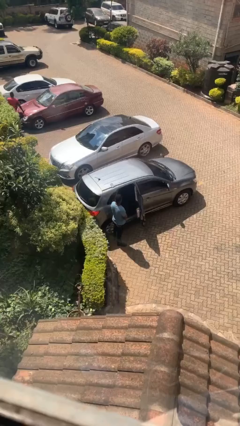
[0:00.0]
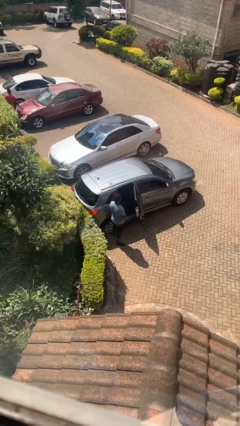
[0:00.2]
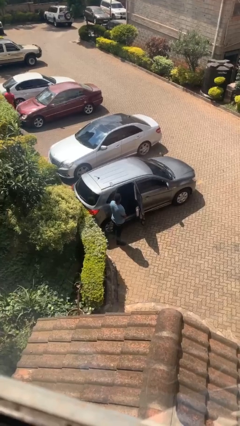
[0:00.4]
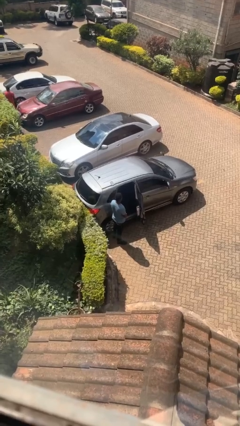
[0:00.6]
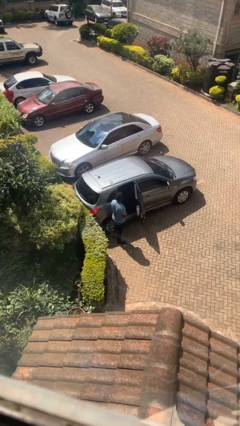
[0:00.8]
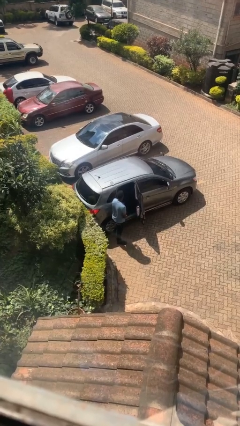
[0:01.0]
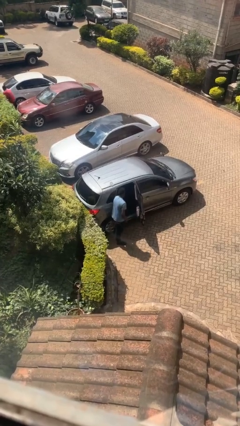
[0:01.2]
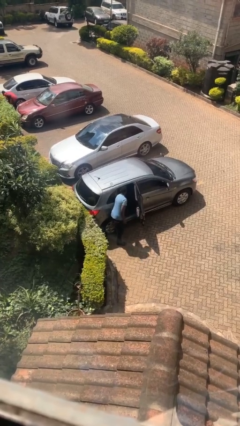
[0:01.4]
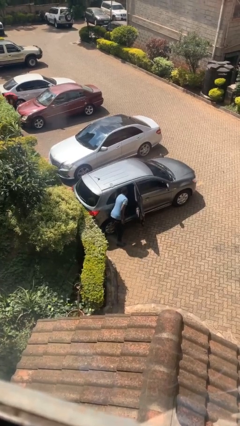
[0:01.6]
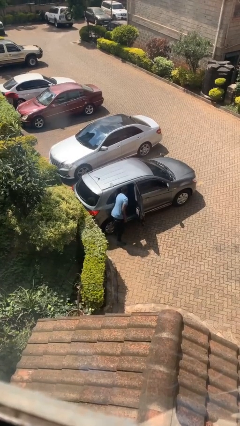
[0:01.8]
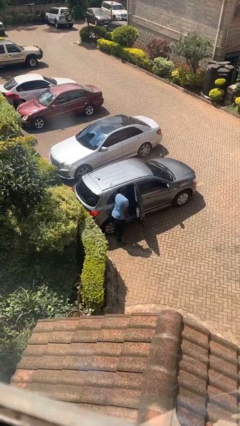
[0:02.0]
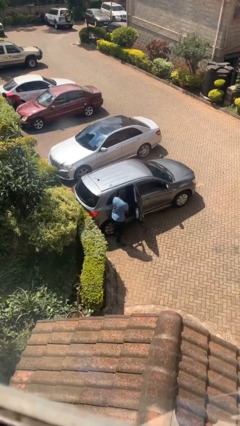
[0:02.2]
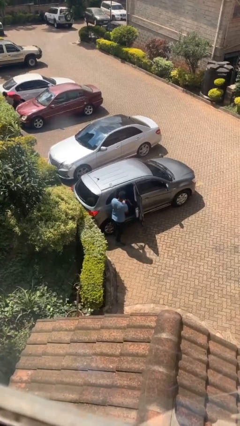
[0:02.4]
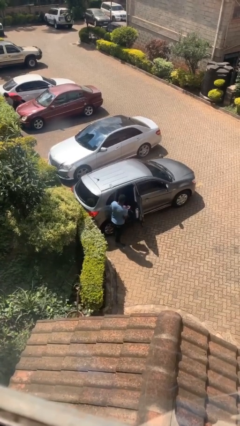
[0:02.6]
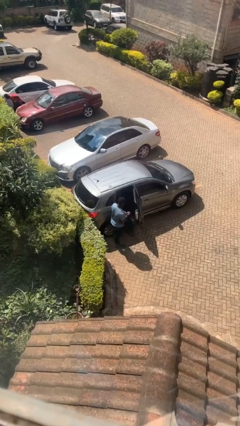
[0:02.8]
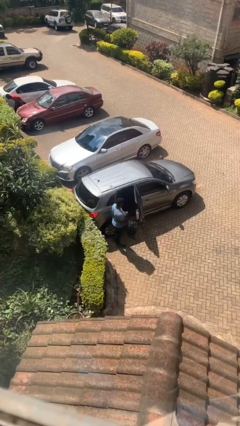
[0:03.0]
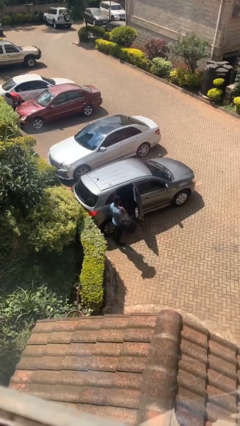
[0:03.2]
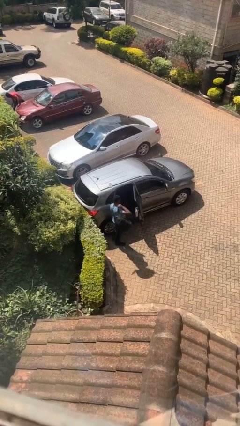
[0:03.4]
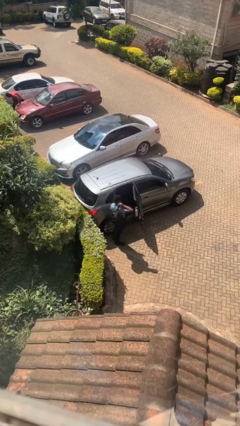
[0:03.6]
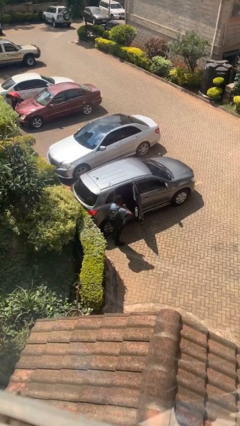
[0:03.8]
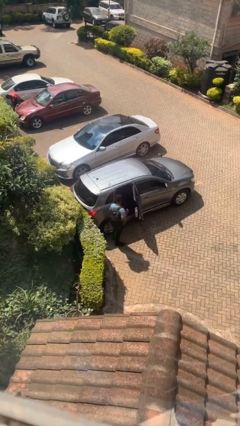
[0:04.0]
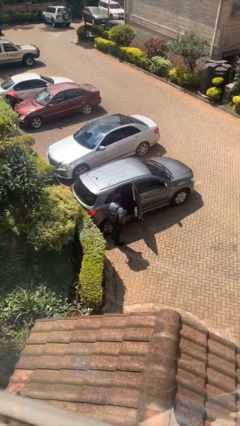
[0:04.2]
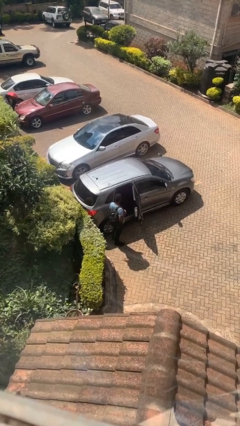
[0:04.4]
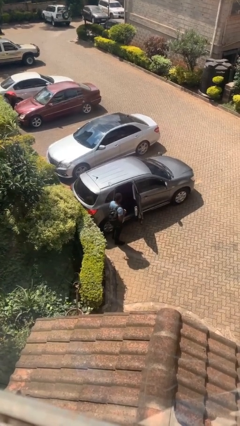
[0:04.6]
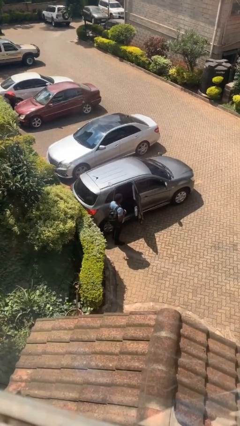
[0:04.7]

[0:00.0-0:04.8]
person unloads car

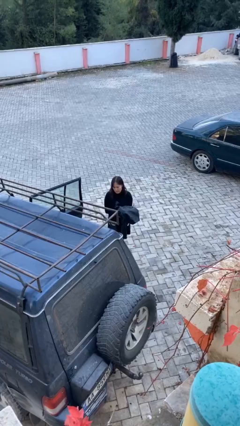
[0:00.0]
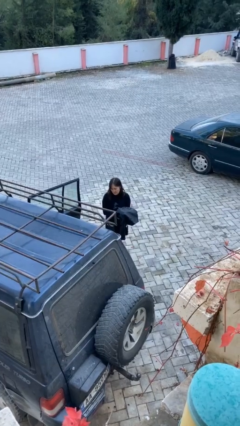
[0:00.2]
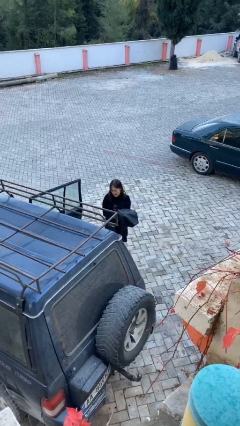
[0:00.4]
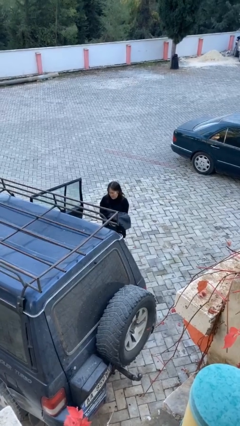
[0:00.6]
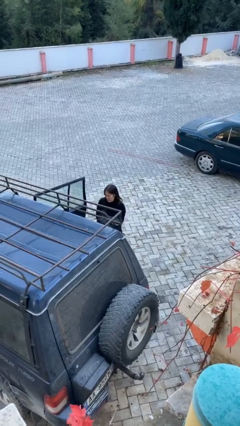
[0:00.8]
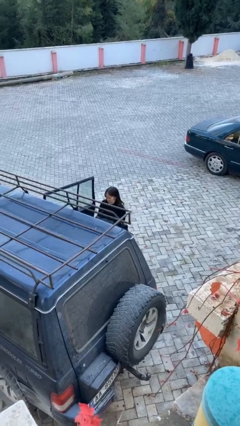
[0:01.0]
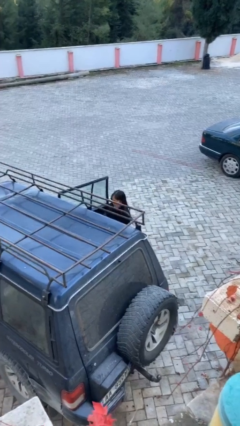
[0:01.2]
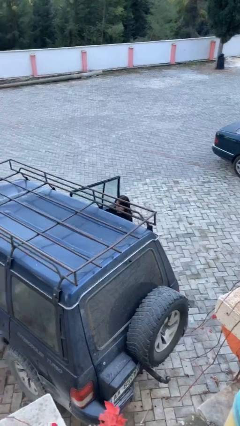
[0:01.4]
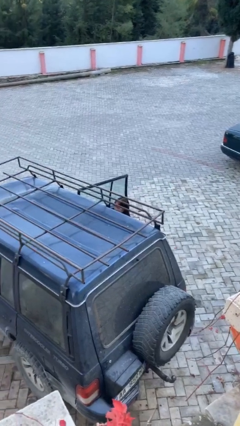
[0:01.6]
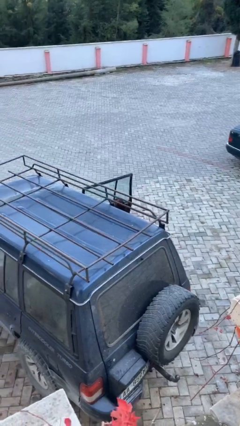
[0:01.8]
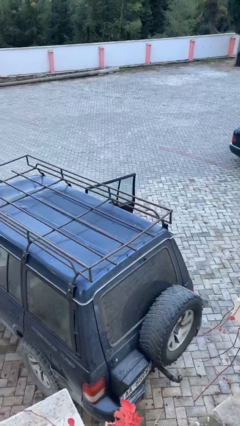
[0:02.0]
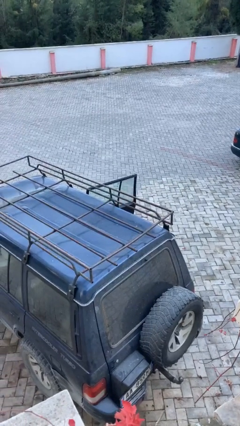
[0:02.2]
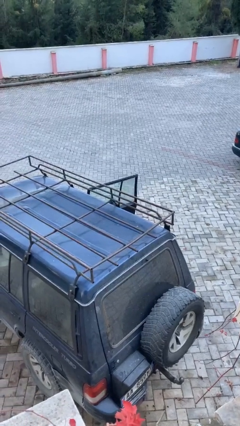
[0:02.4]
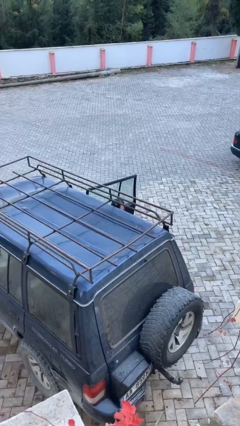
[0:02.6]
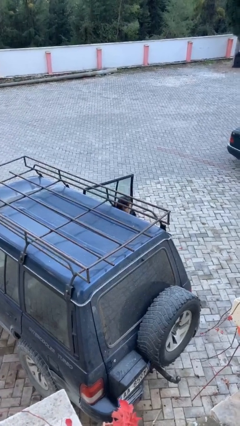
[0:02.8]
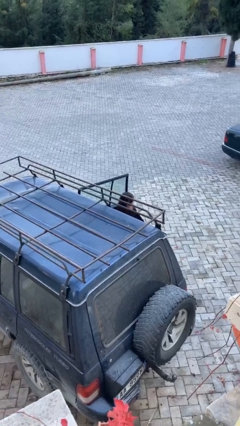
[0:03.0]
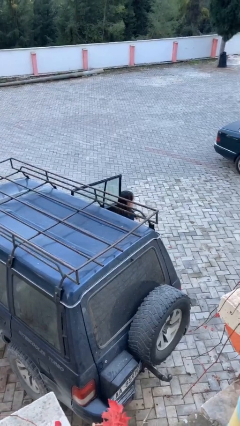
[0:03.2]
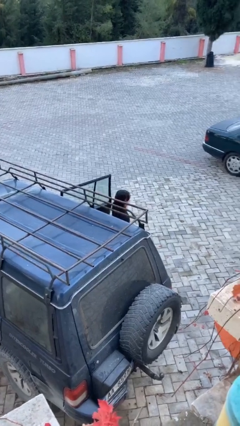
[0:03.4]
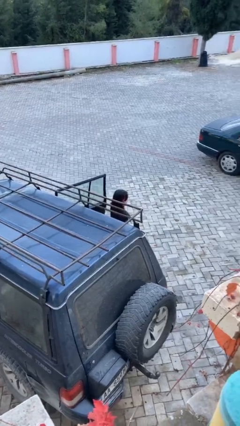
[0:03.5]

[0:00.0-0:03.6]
person loads car

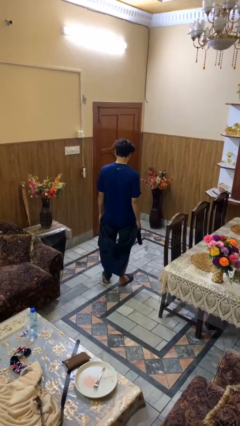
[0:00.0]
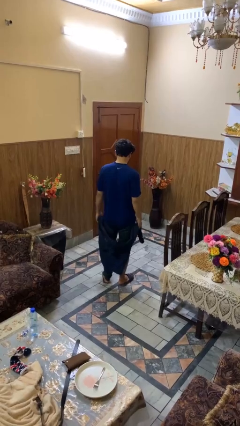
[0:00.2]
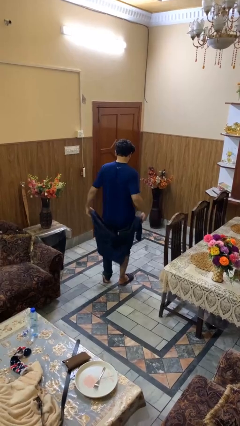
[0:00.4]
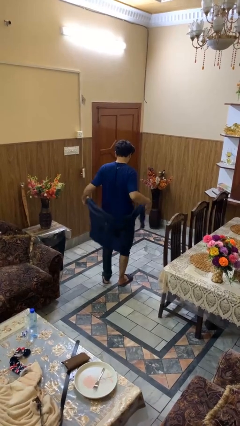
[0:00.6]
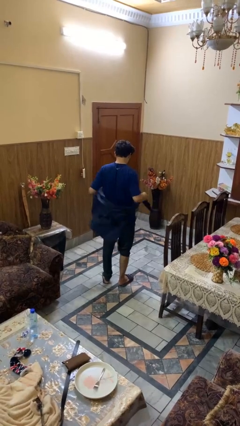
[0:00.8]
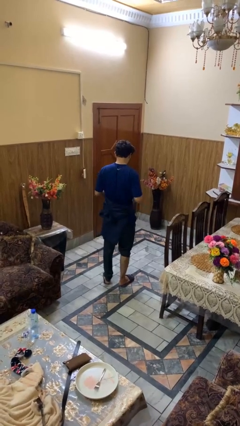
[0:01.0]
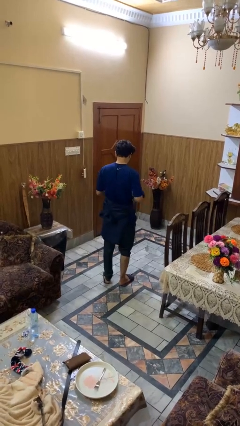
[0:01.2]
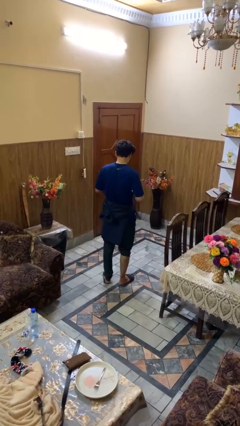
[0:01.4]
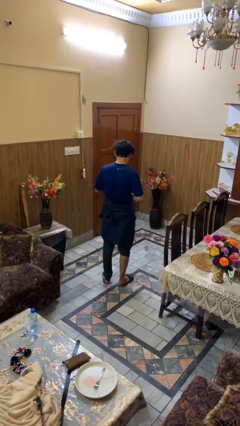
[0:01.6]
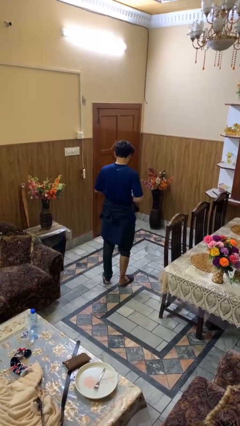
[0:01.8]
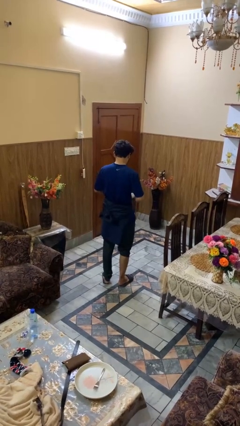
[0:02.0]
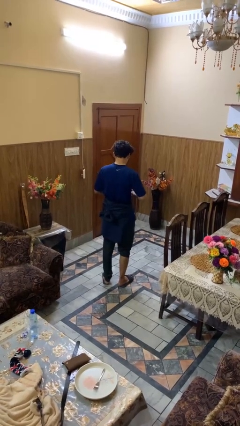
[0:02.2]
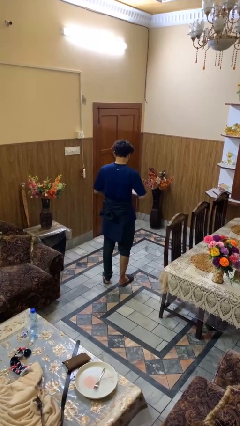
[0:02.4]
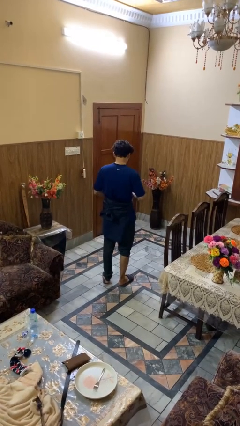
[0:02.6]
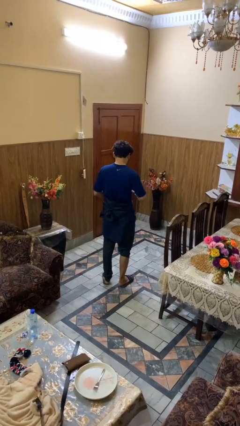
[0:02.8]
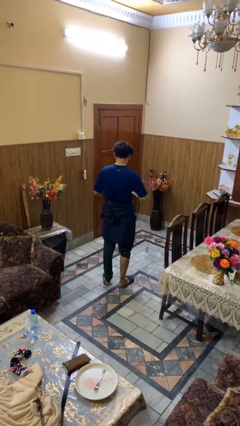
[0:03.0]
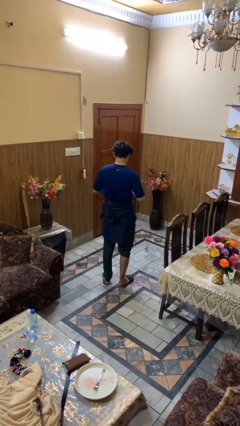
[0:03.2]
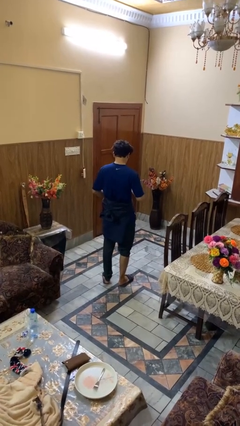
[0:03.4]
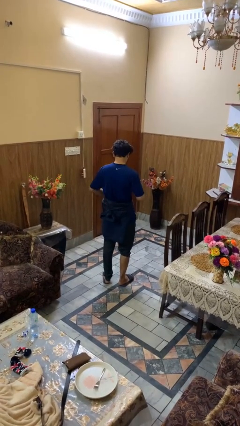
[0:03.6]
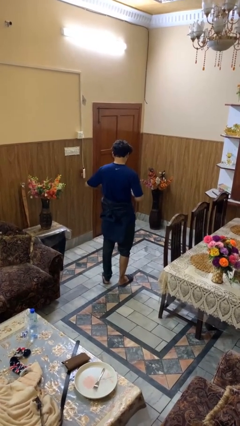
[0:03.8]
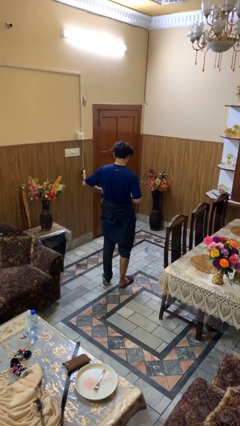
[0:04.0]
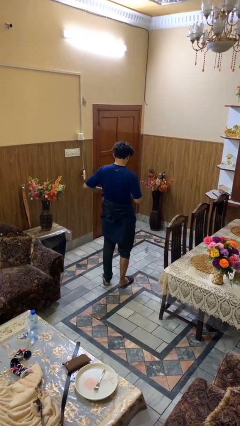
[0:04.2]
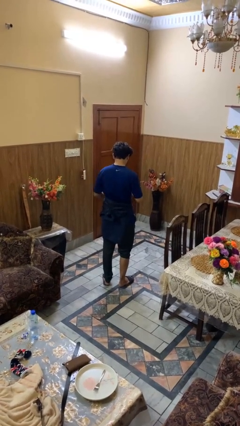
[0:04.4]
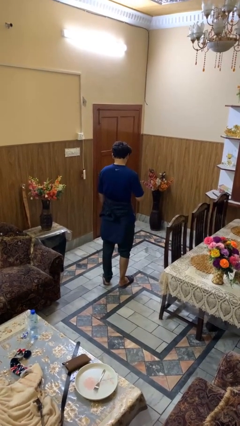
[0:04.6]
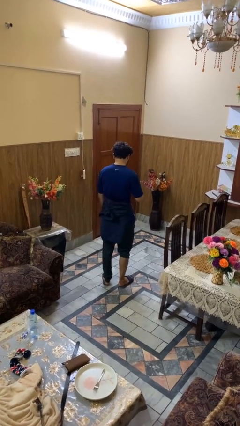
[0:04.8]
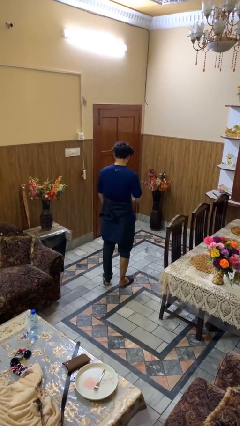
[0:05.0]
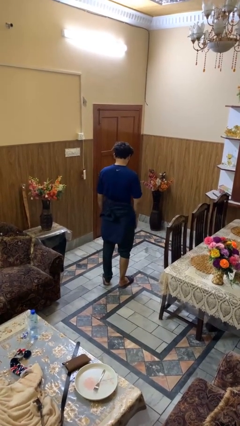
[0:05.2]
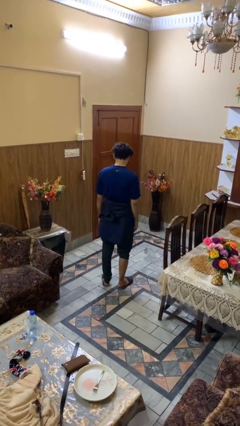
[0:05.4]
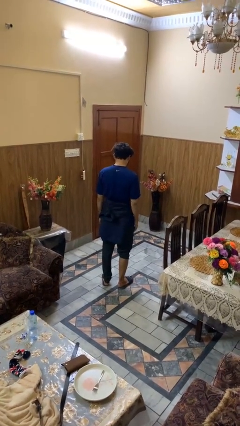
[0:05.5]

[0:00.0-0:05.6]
person ties jacket around waist

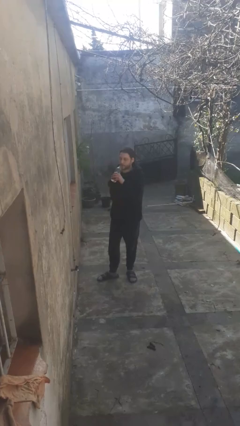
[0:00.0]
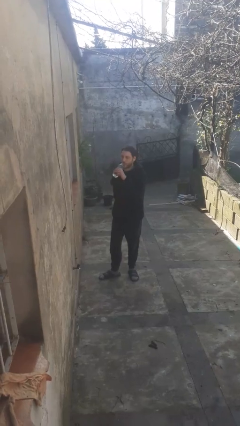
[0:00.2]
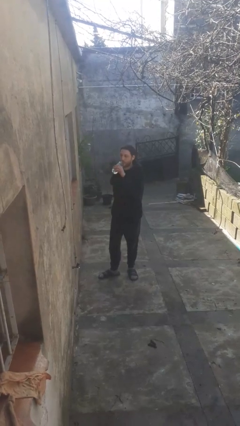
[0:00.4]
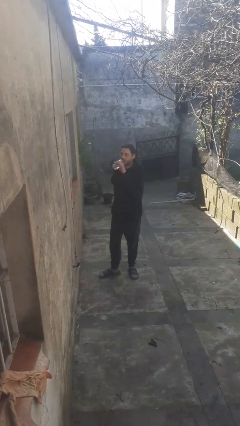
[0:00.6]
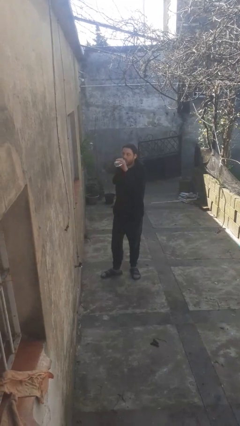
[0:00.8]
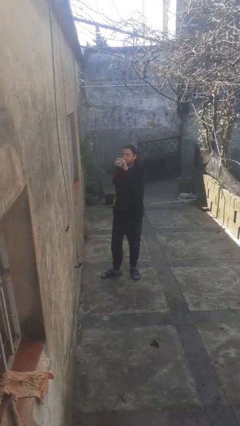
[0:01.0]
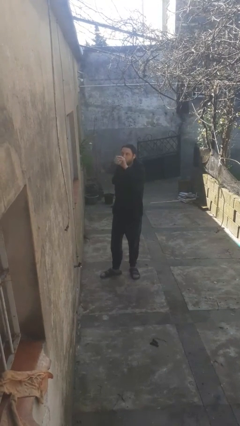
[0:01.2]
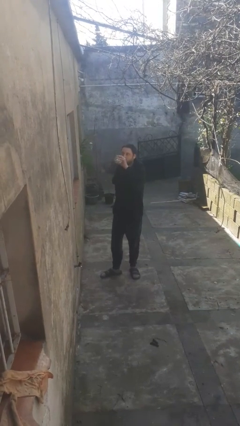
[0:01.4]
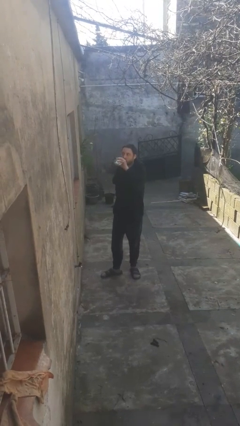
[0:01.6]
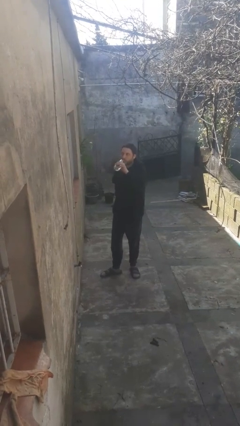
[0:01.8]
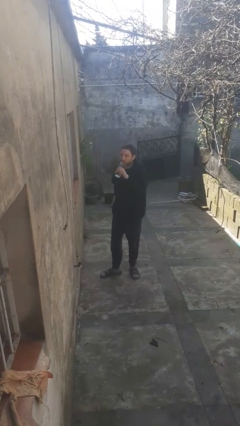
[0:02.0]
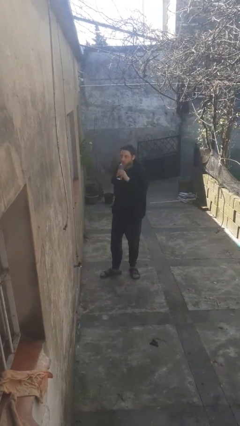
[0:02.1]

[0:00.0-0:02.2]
person drinks from bottle

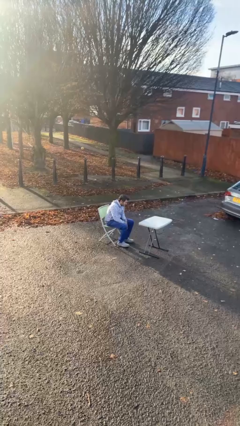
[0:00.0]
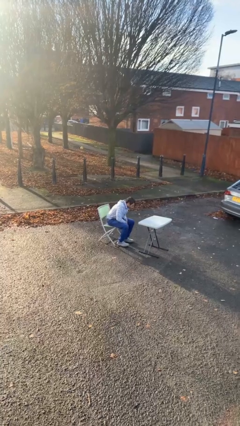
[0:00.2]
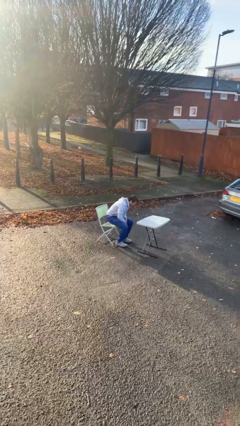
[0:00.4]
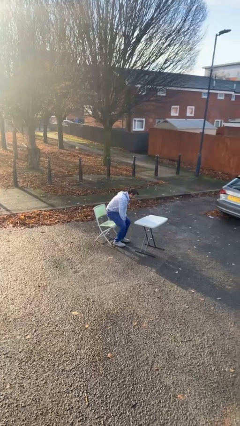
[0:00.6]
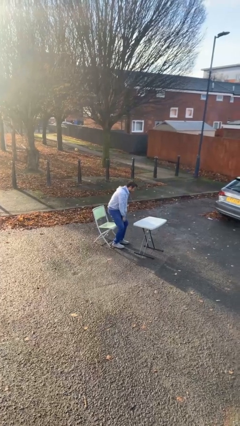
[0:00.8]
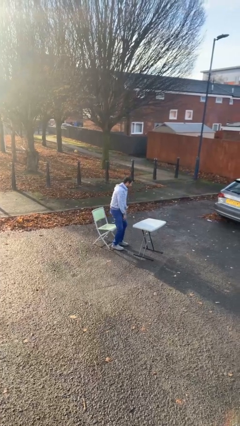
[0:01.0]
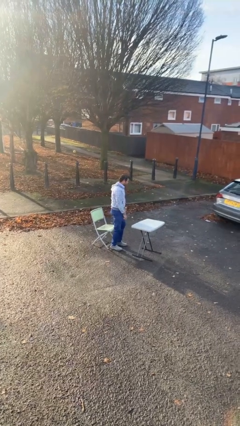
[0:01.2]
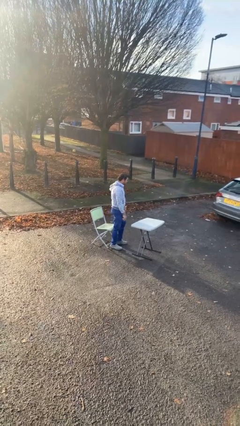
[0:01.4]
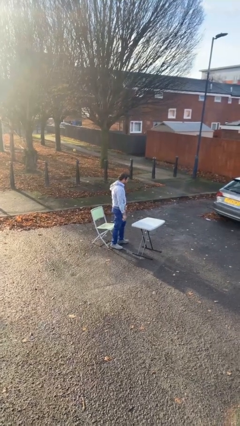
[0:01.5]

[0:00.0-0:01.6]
person stands up
